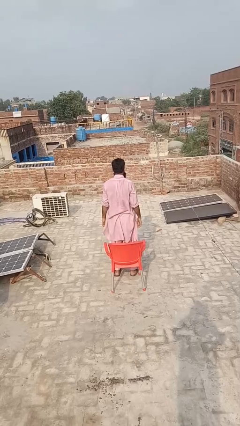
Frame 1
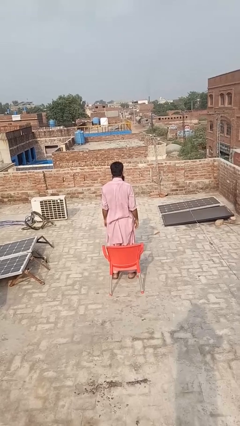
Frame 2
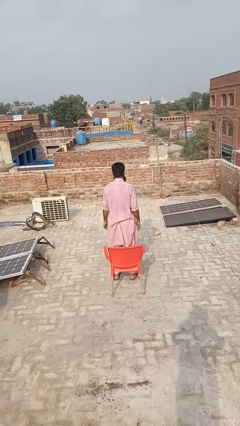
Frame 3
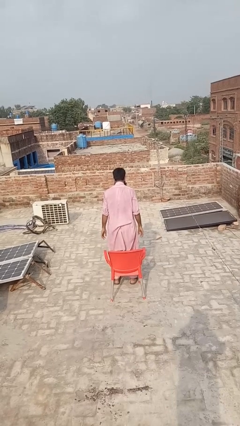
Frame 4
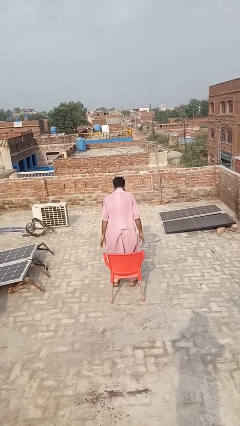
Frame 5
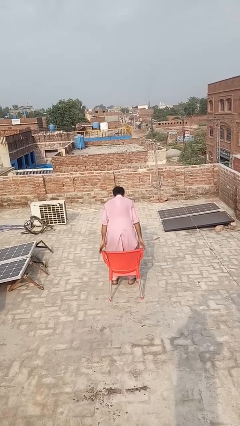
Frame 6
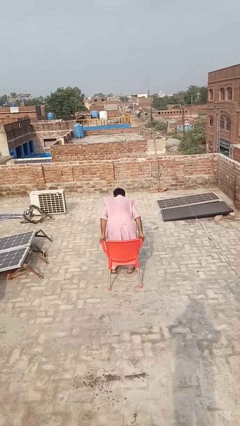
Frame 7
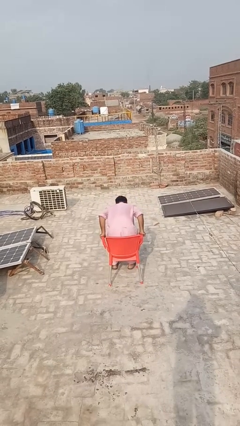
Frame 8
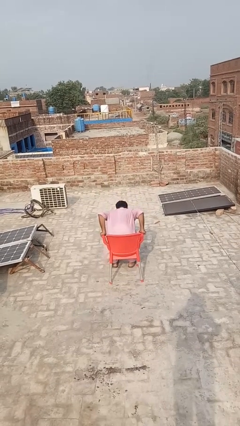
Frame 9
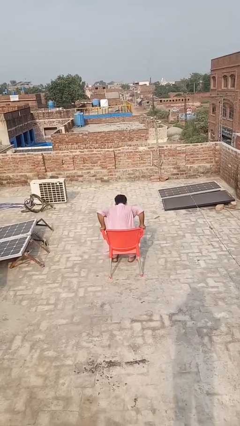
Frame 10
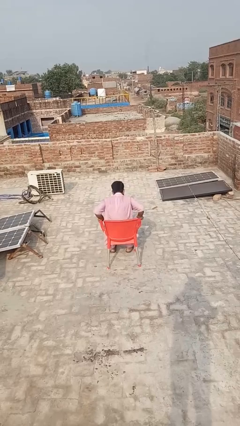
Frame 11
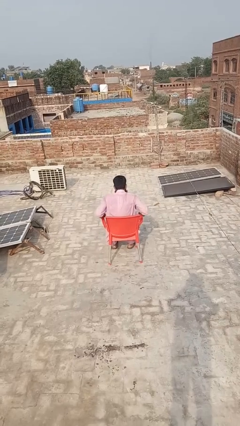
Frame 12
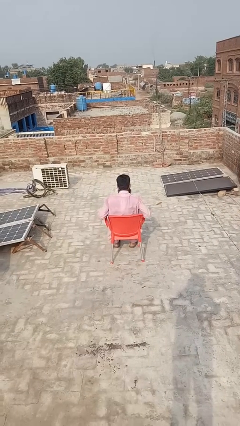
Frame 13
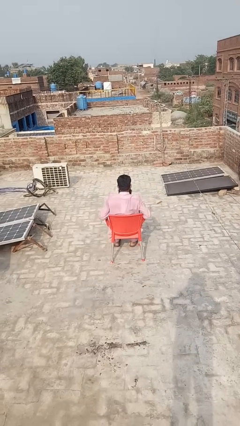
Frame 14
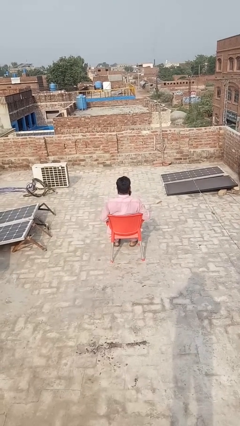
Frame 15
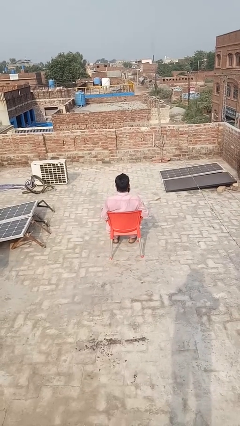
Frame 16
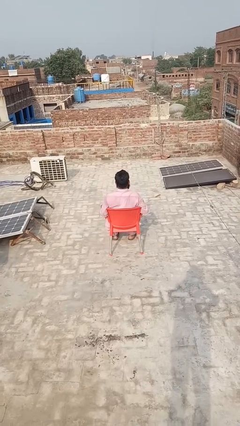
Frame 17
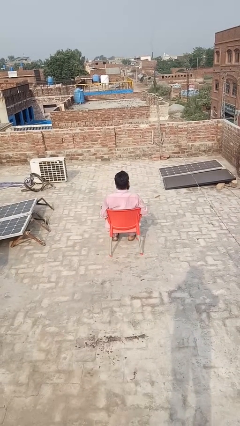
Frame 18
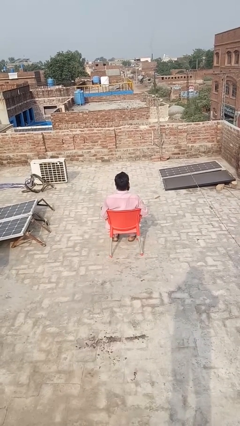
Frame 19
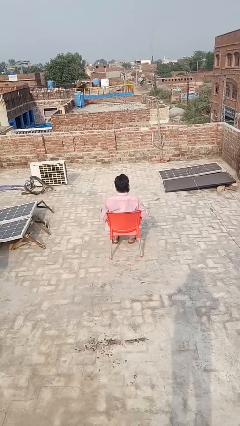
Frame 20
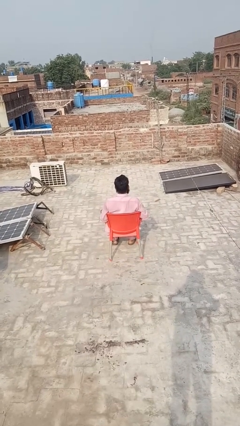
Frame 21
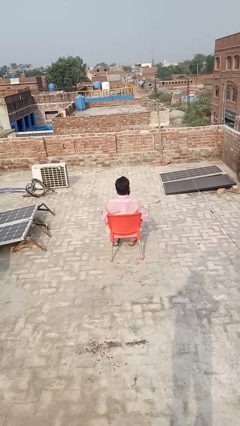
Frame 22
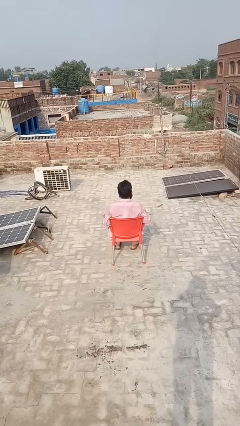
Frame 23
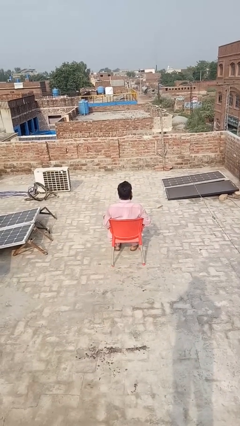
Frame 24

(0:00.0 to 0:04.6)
person sits down

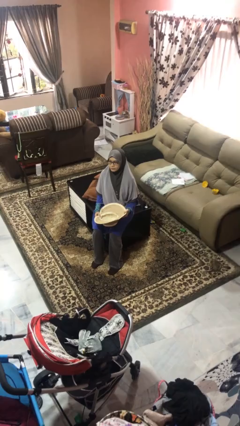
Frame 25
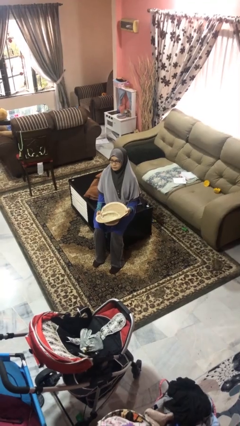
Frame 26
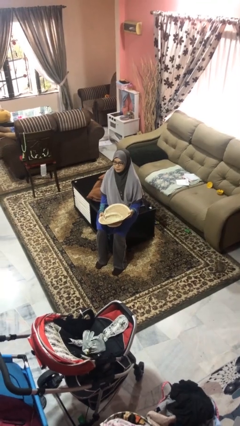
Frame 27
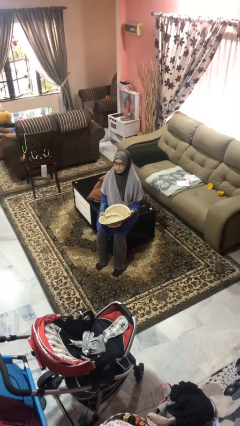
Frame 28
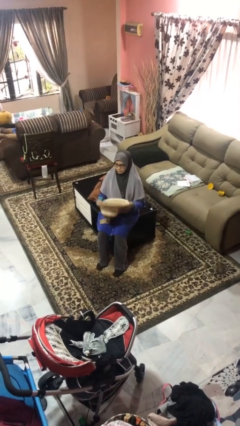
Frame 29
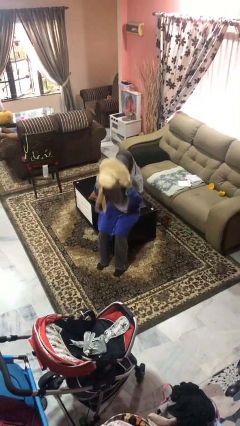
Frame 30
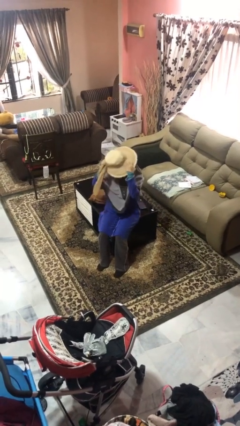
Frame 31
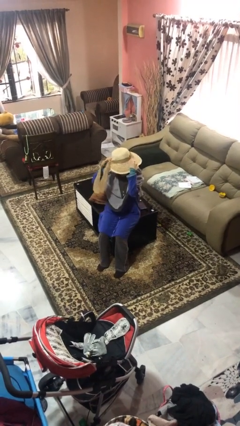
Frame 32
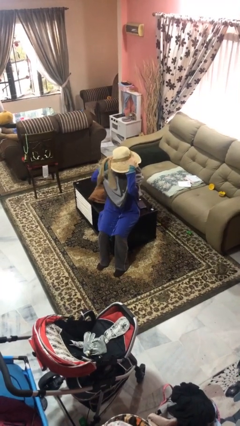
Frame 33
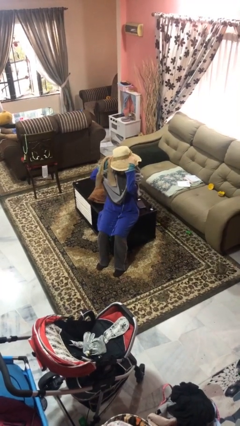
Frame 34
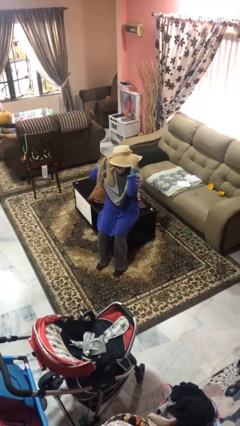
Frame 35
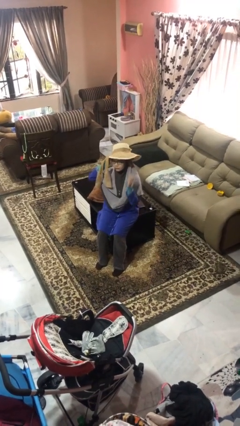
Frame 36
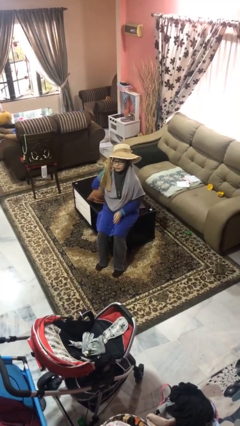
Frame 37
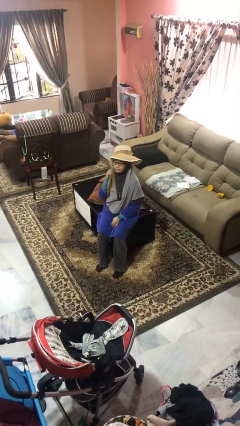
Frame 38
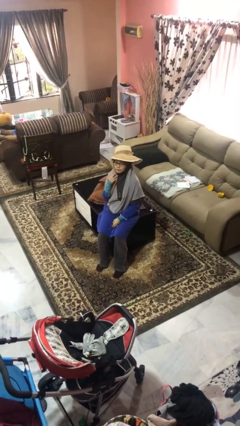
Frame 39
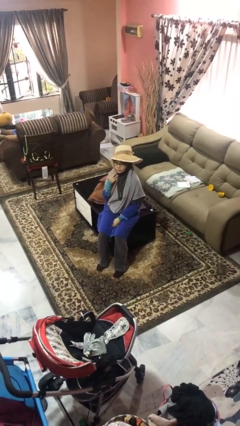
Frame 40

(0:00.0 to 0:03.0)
person puts on hat

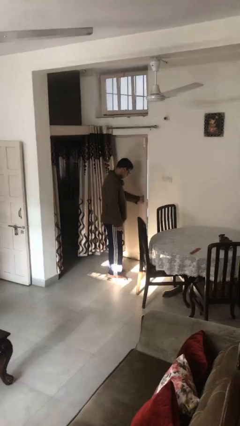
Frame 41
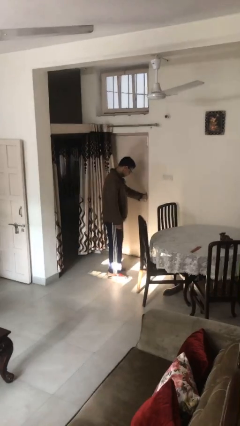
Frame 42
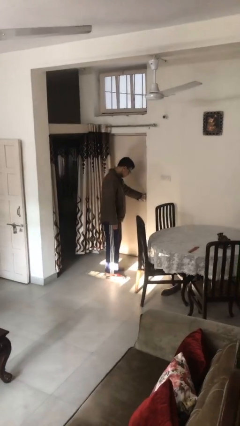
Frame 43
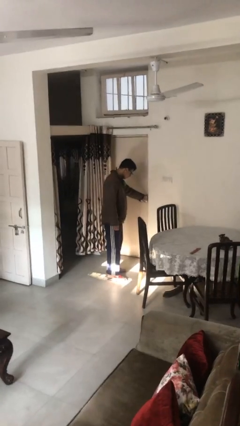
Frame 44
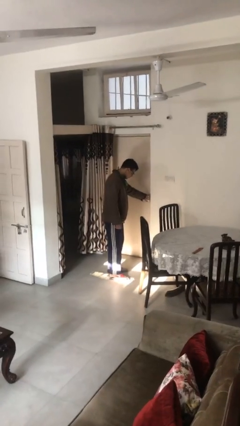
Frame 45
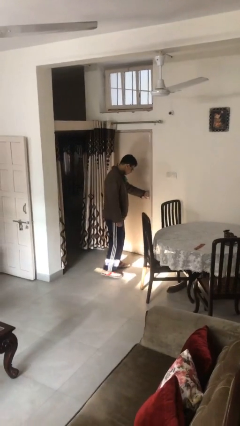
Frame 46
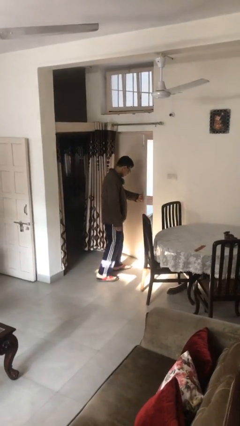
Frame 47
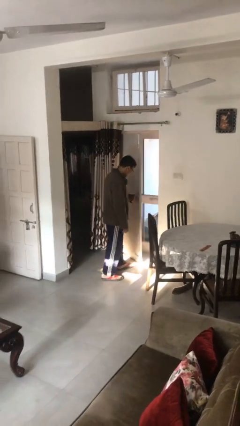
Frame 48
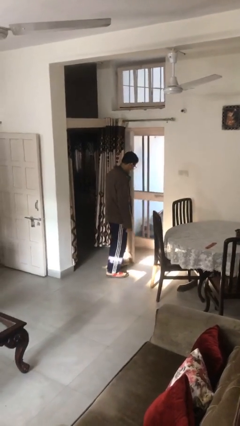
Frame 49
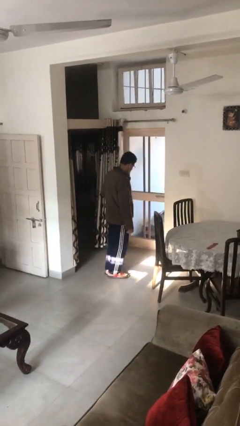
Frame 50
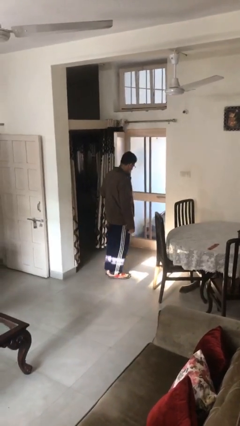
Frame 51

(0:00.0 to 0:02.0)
person opens facility door

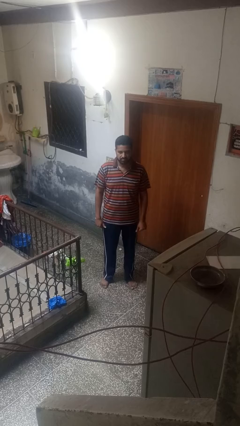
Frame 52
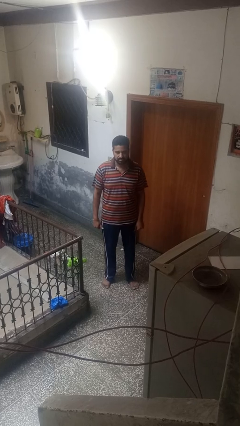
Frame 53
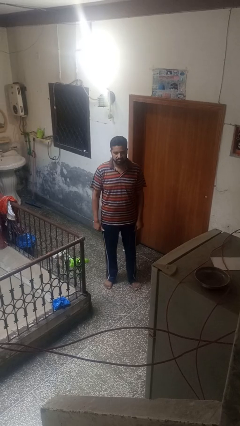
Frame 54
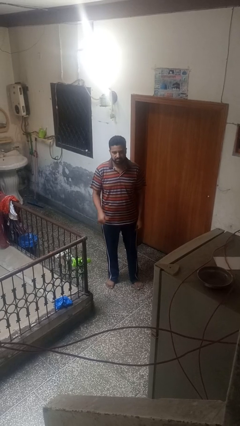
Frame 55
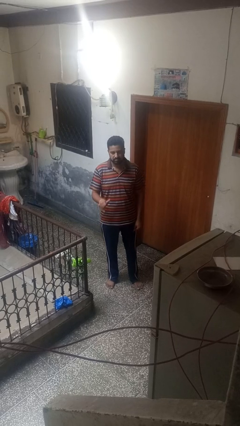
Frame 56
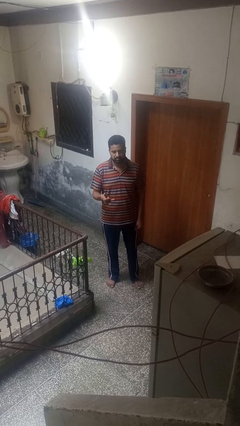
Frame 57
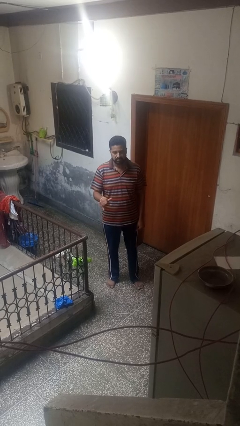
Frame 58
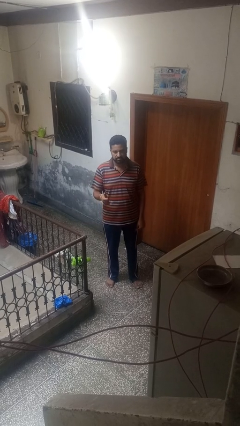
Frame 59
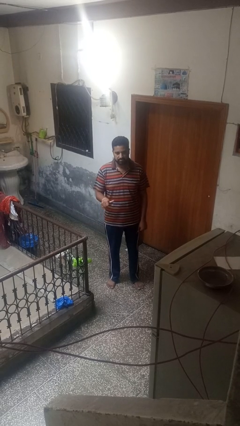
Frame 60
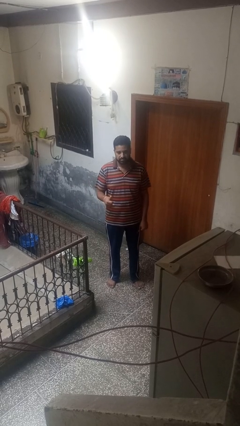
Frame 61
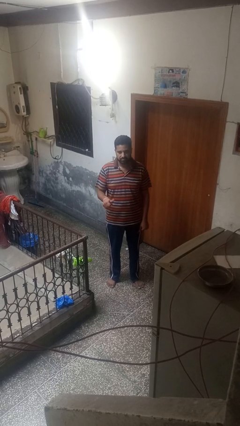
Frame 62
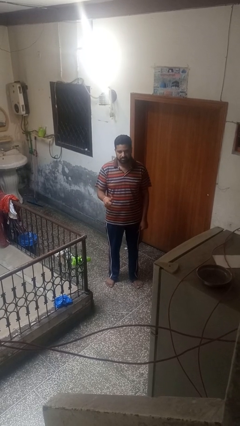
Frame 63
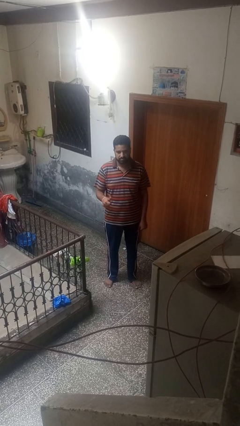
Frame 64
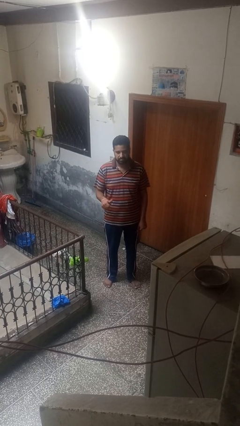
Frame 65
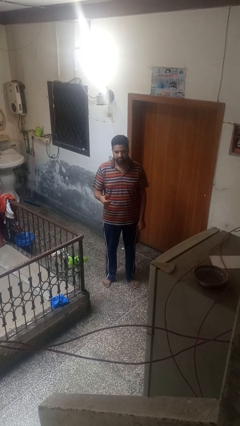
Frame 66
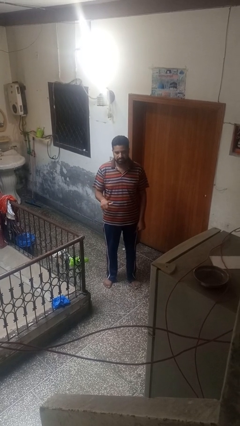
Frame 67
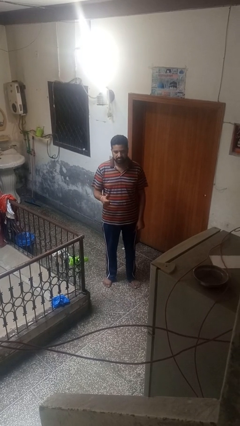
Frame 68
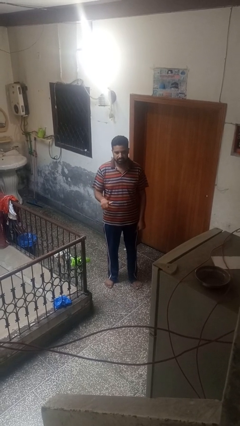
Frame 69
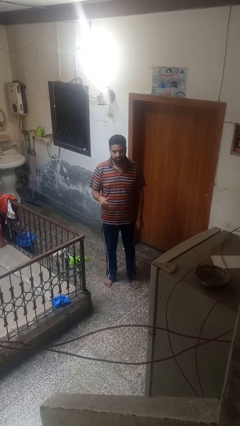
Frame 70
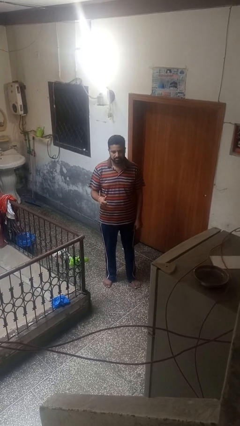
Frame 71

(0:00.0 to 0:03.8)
person gestures hang loose

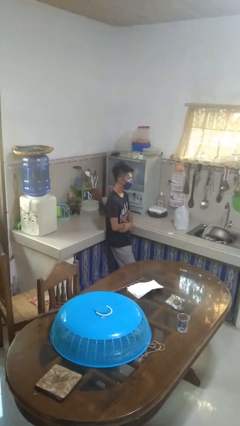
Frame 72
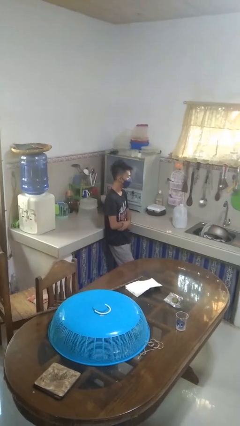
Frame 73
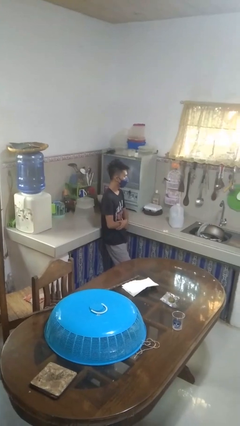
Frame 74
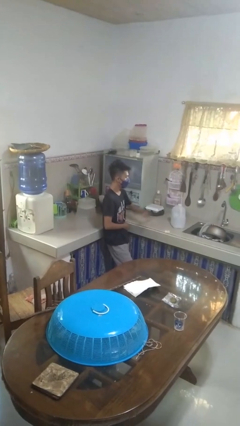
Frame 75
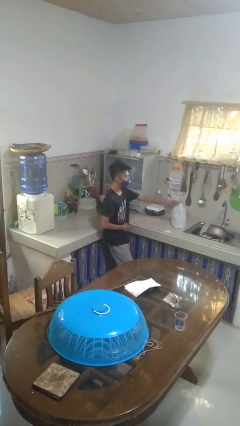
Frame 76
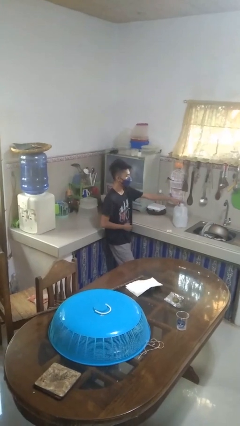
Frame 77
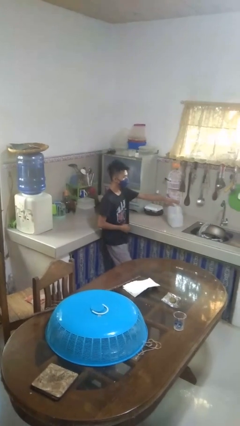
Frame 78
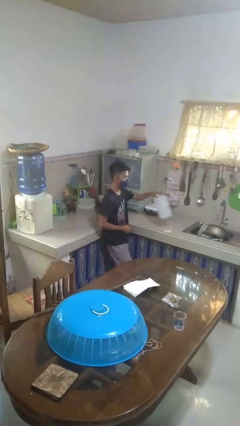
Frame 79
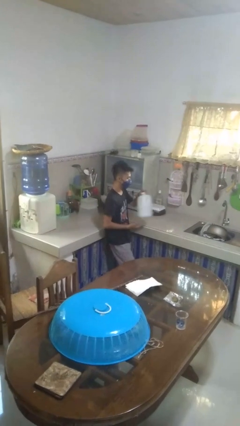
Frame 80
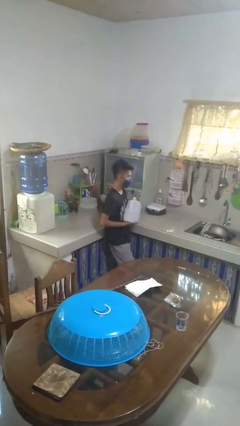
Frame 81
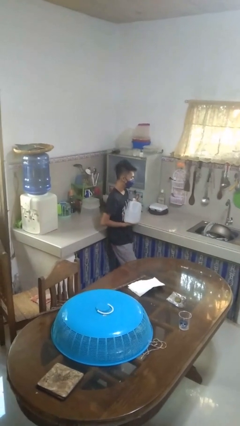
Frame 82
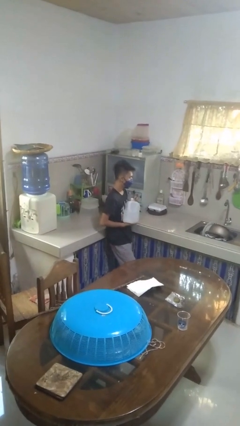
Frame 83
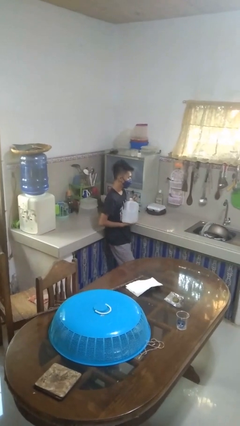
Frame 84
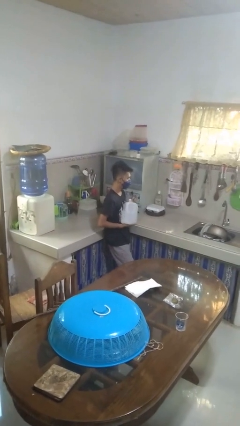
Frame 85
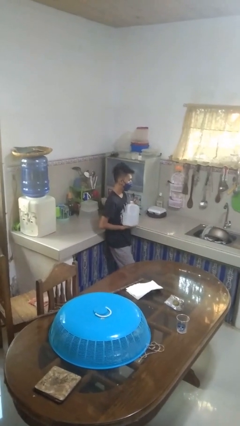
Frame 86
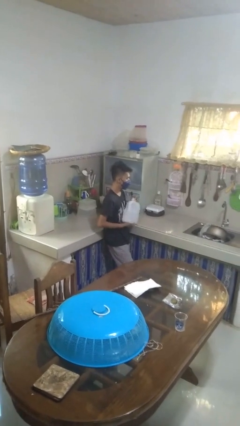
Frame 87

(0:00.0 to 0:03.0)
person picks up object from countertop

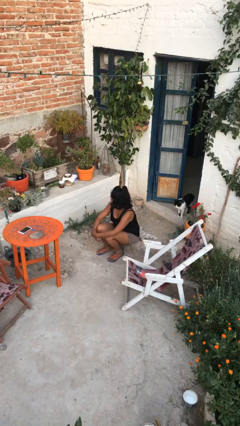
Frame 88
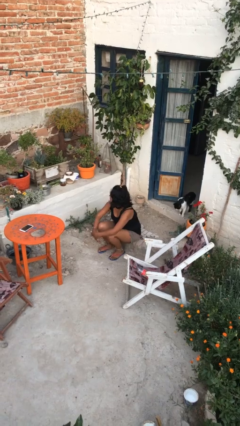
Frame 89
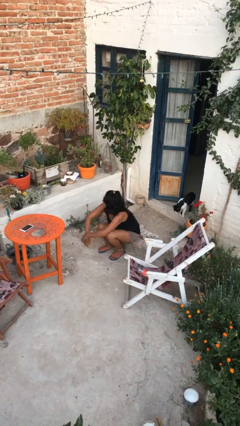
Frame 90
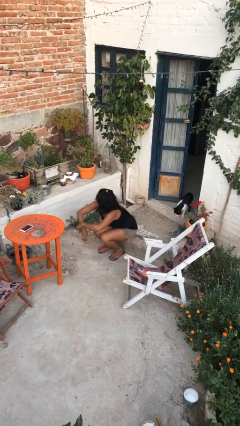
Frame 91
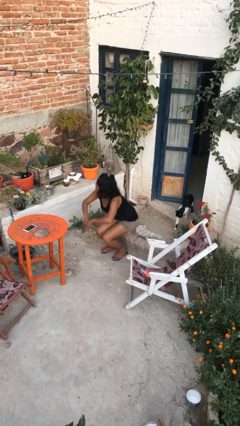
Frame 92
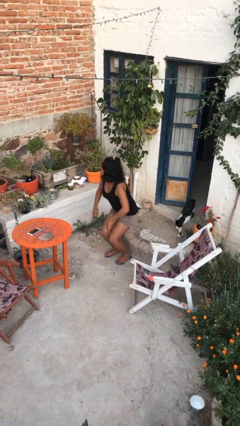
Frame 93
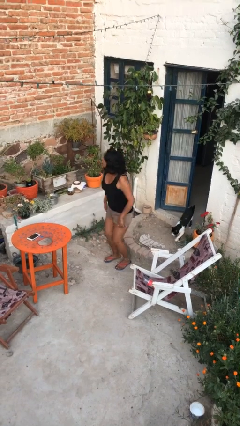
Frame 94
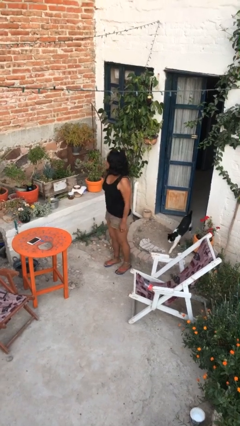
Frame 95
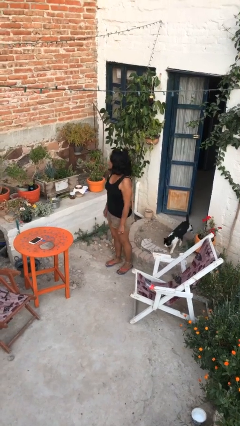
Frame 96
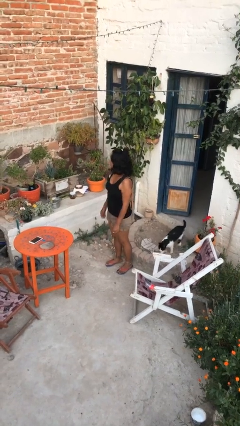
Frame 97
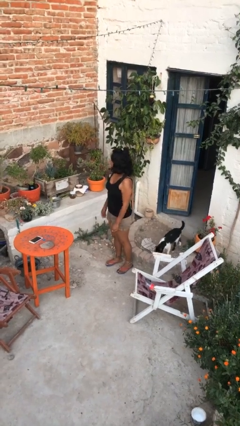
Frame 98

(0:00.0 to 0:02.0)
person stands up
